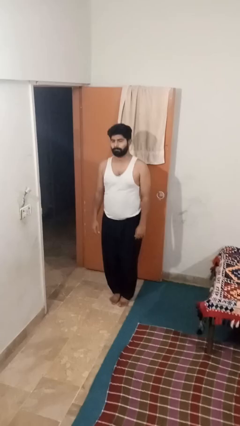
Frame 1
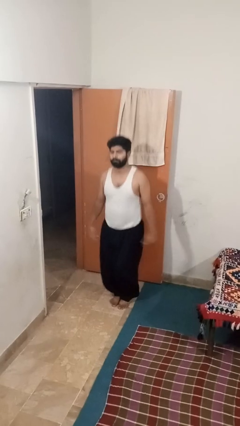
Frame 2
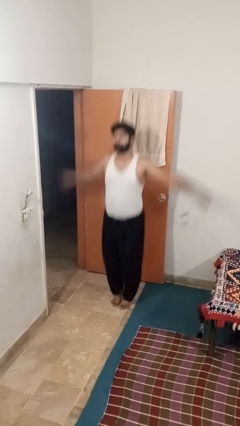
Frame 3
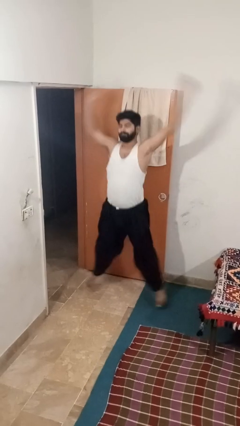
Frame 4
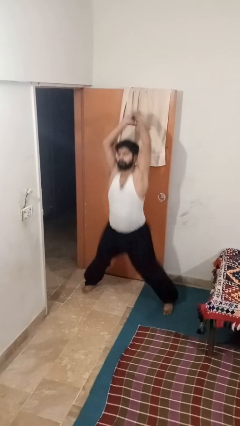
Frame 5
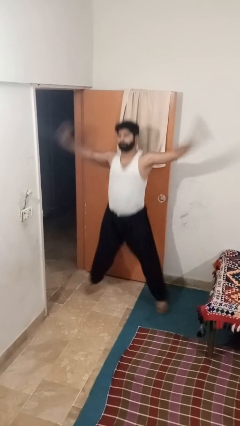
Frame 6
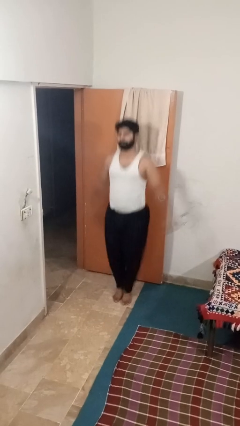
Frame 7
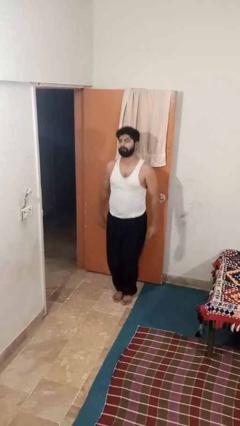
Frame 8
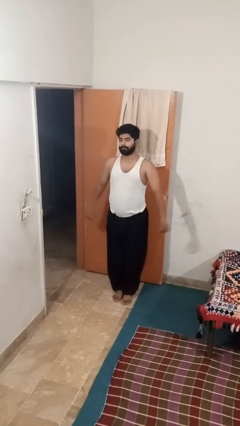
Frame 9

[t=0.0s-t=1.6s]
person exercises with jumping jacks

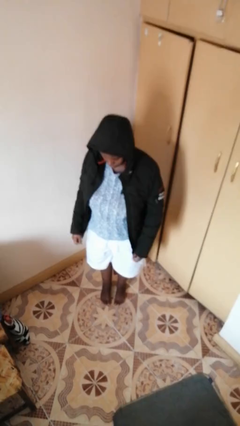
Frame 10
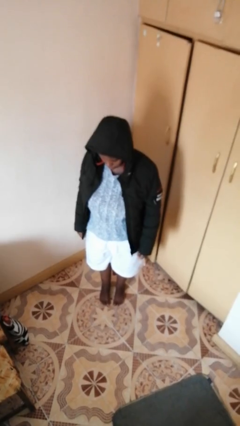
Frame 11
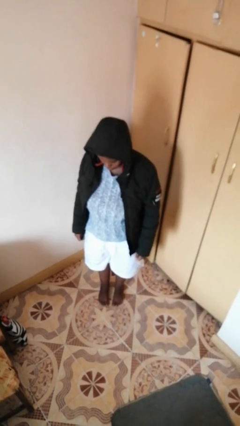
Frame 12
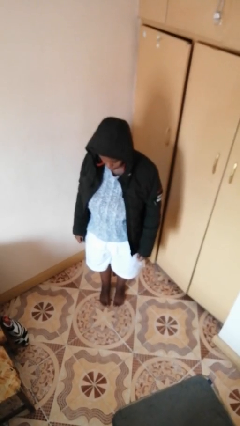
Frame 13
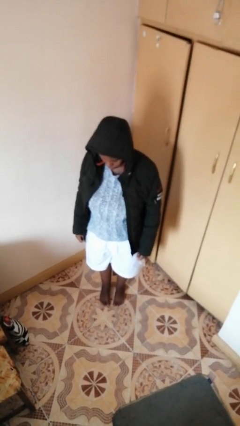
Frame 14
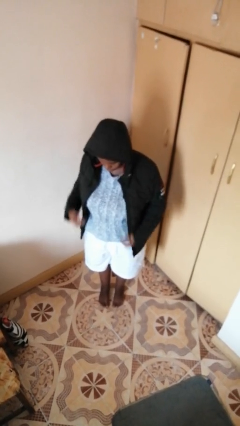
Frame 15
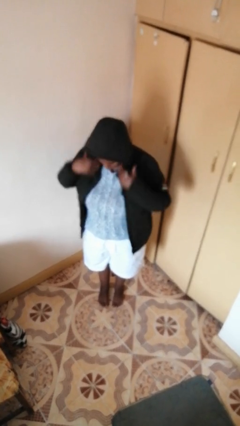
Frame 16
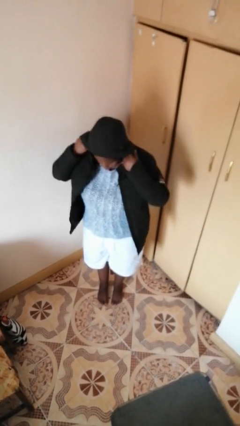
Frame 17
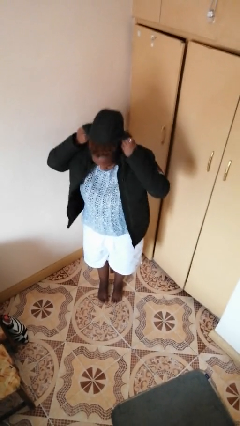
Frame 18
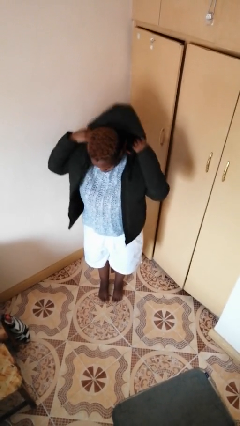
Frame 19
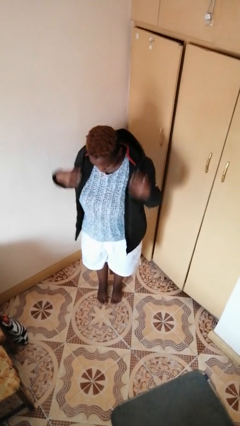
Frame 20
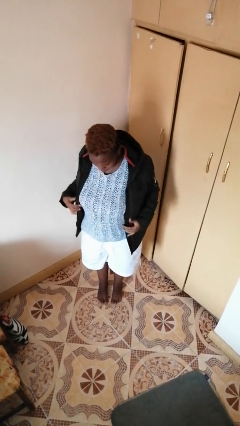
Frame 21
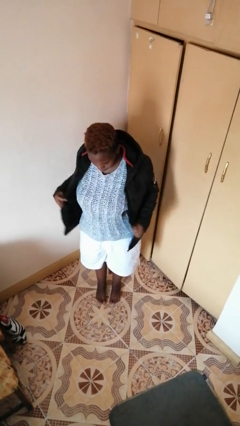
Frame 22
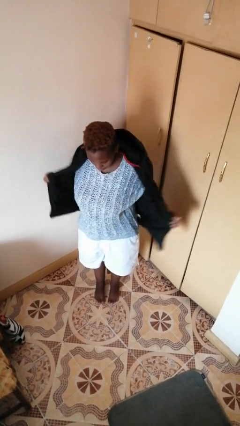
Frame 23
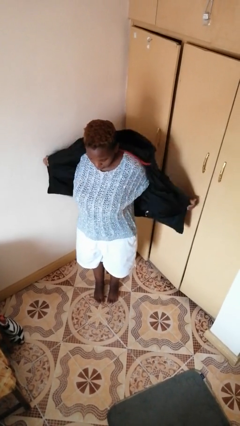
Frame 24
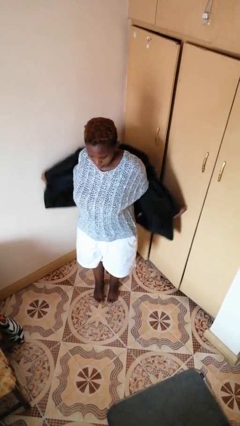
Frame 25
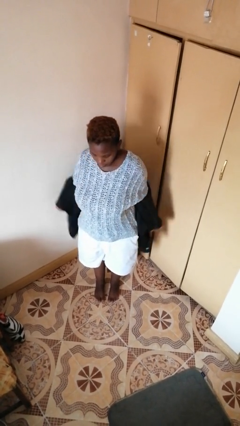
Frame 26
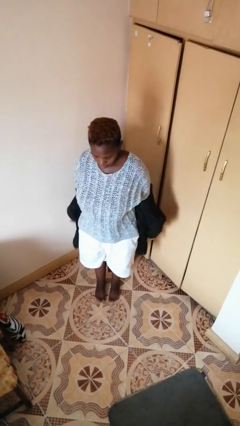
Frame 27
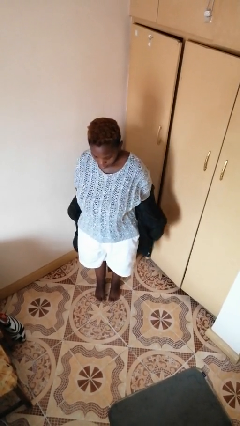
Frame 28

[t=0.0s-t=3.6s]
person takes off hoodie

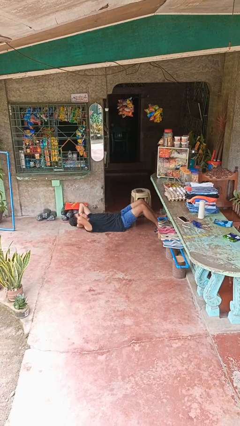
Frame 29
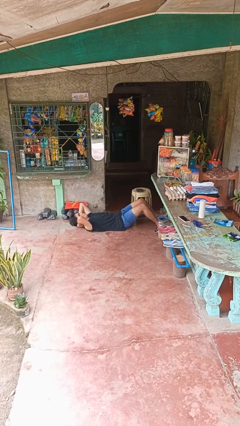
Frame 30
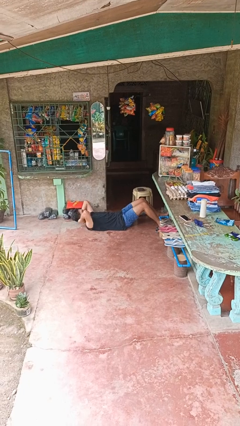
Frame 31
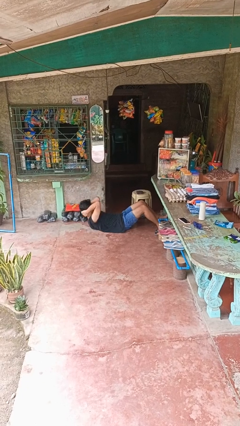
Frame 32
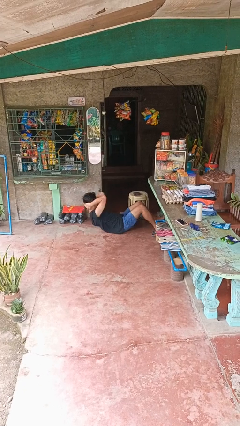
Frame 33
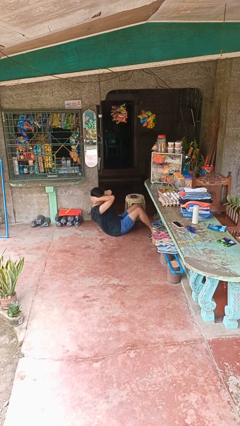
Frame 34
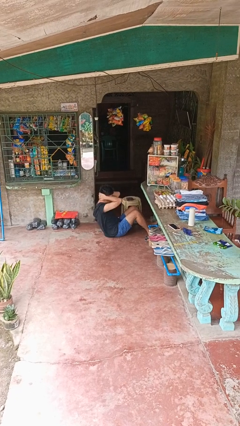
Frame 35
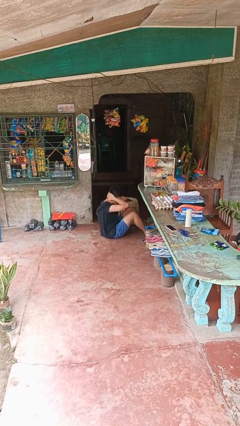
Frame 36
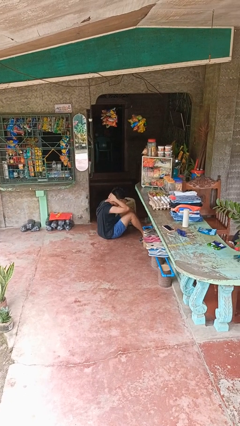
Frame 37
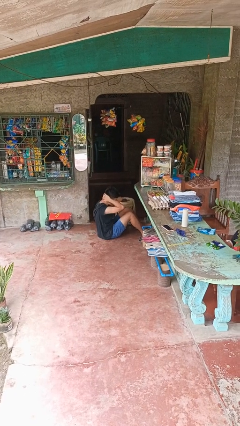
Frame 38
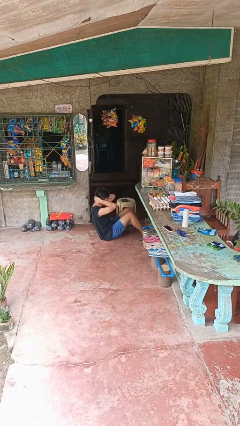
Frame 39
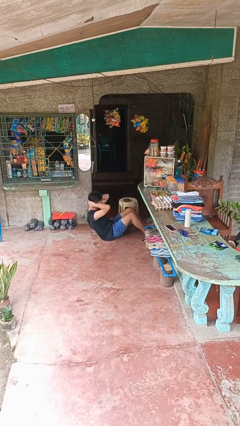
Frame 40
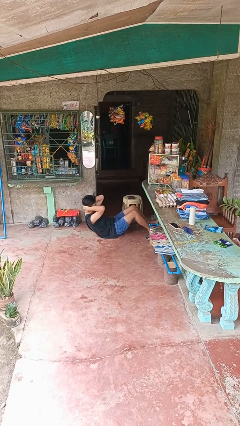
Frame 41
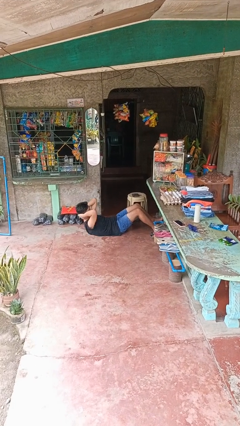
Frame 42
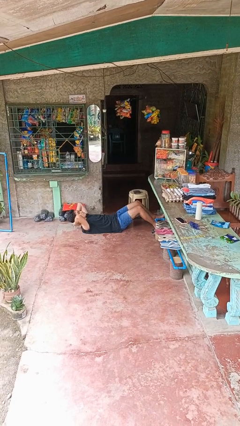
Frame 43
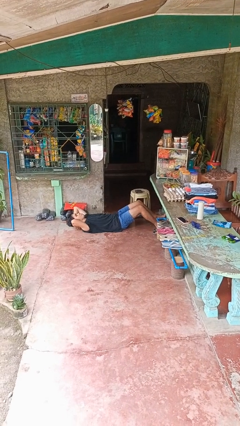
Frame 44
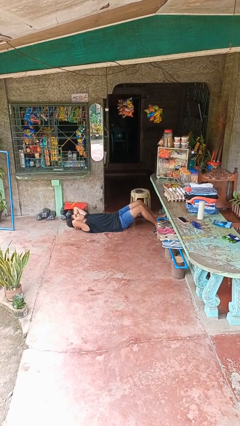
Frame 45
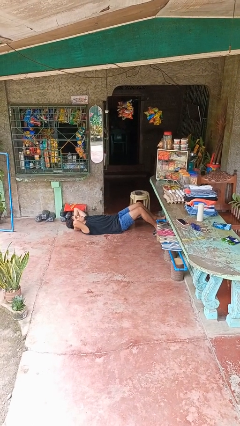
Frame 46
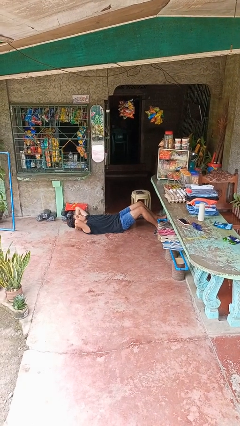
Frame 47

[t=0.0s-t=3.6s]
person exercises with situp

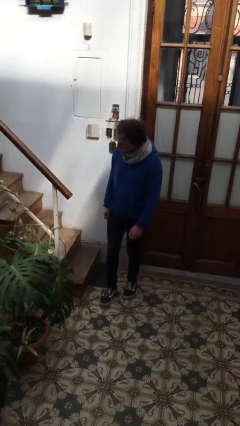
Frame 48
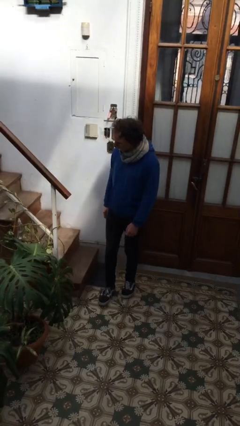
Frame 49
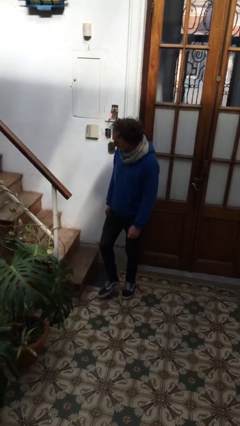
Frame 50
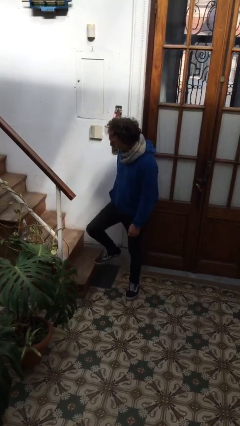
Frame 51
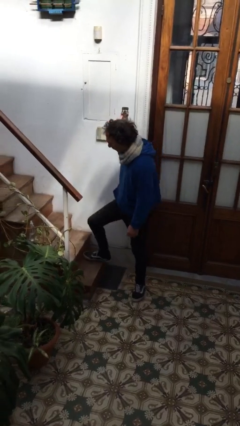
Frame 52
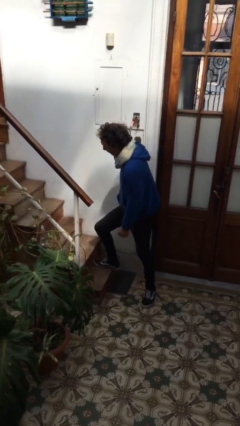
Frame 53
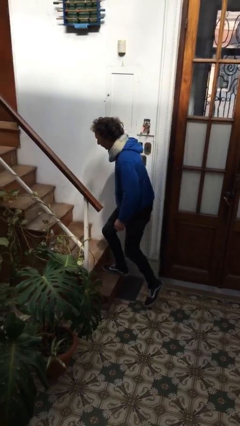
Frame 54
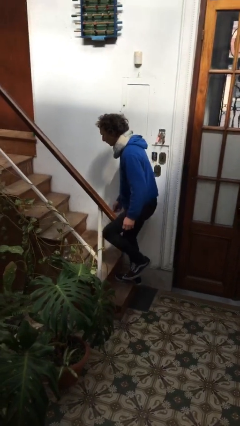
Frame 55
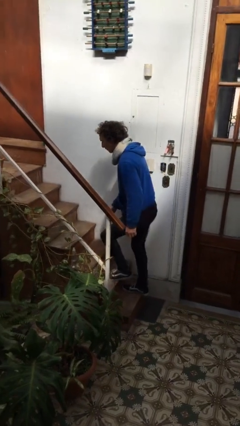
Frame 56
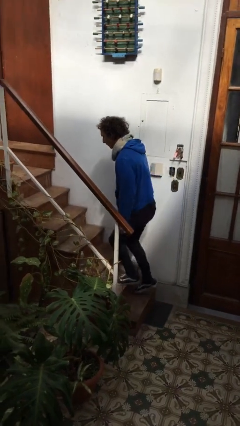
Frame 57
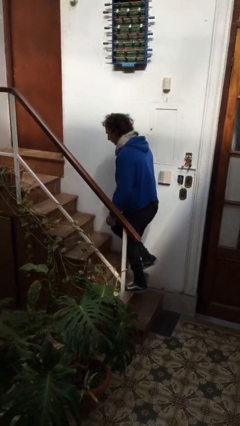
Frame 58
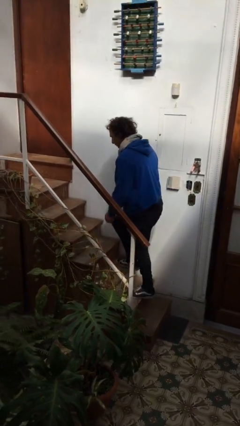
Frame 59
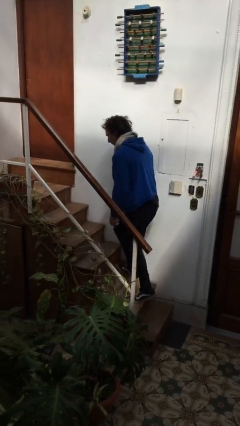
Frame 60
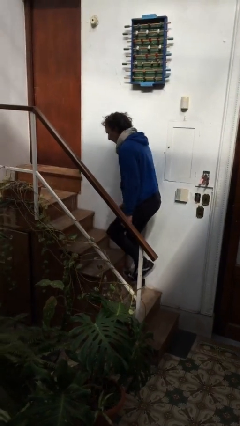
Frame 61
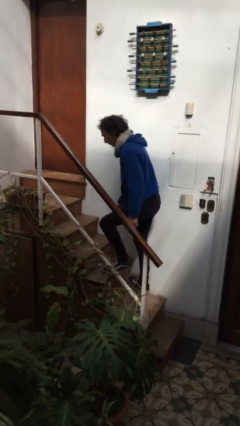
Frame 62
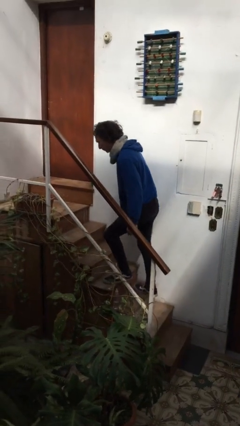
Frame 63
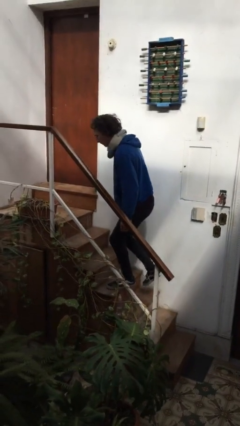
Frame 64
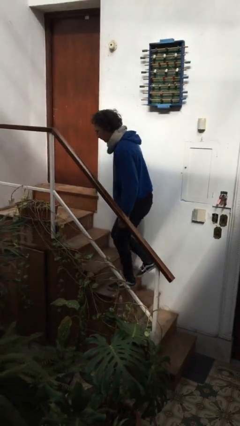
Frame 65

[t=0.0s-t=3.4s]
person climbs up stairs

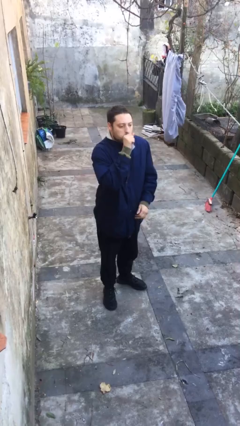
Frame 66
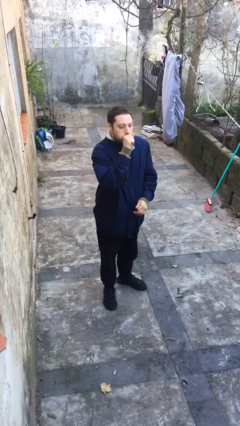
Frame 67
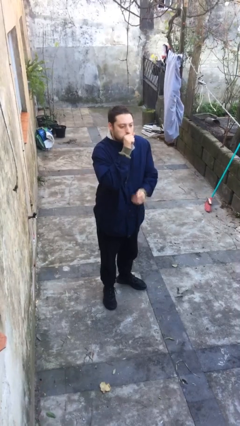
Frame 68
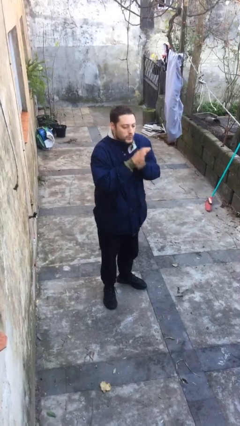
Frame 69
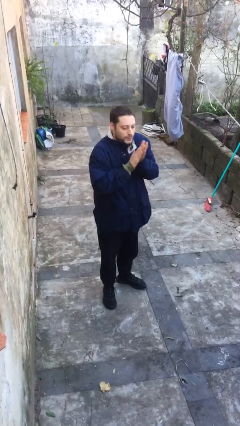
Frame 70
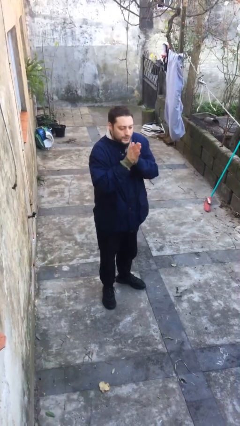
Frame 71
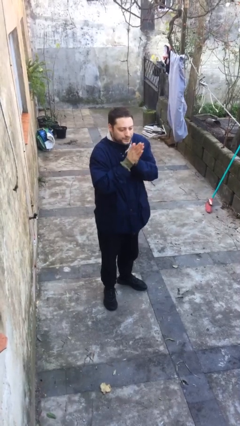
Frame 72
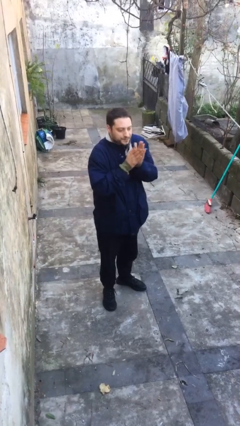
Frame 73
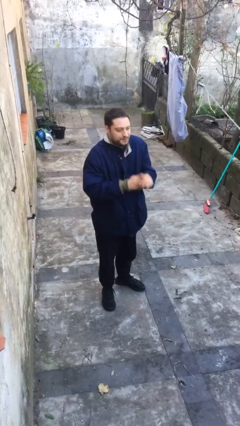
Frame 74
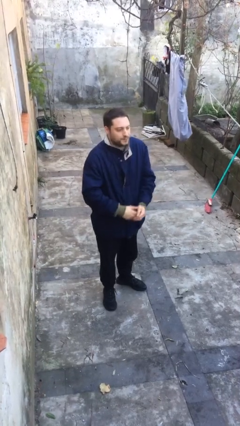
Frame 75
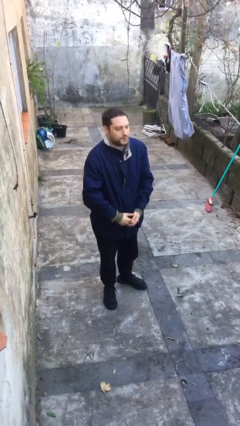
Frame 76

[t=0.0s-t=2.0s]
person blows into hands

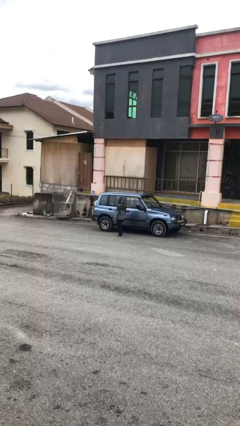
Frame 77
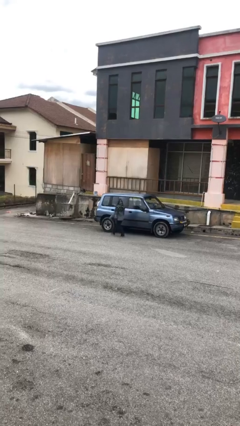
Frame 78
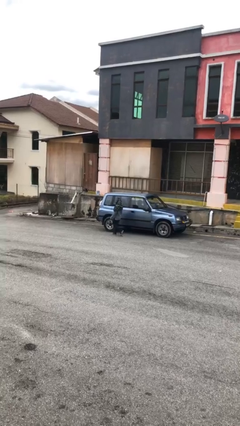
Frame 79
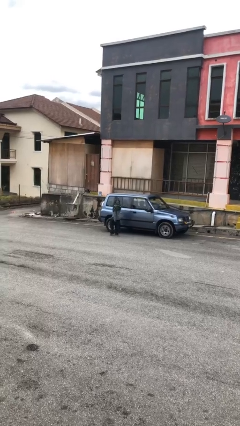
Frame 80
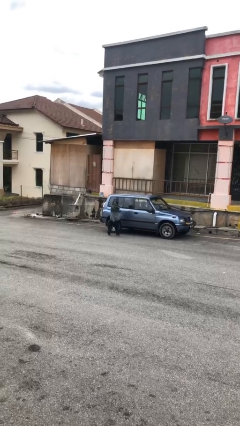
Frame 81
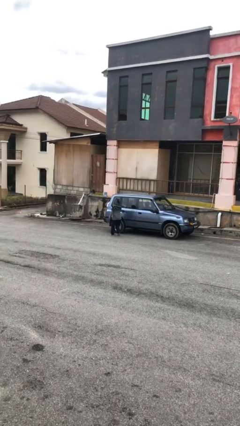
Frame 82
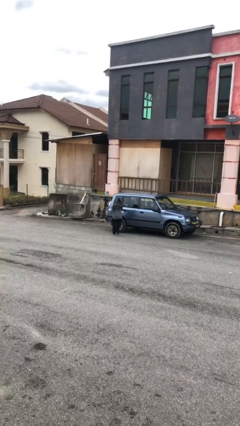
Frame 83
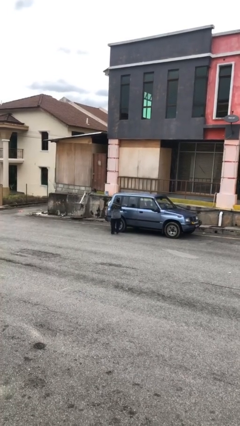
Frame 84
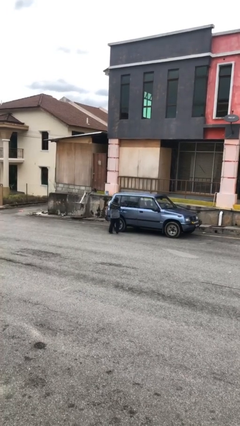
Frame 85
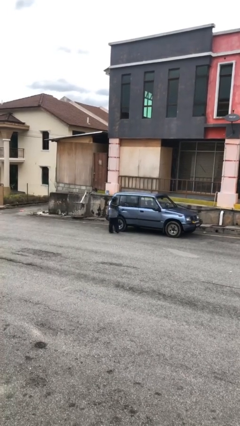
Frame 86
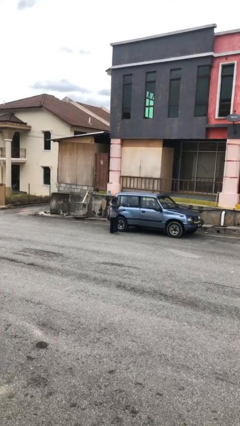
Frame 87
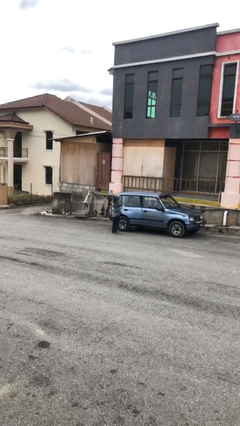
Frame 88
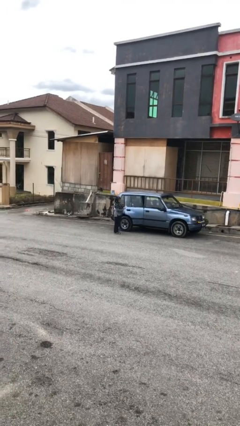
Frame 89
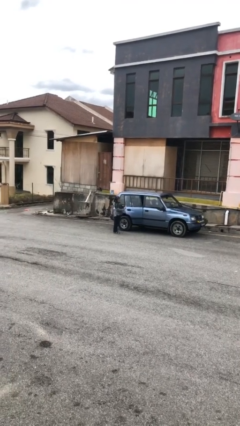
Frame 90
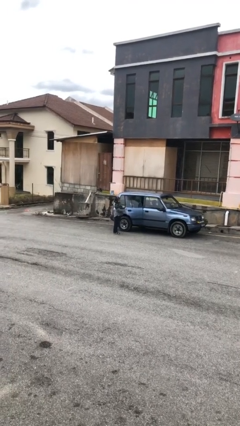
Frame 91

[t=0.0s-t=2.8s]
person opens car door

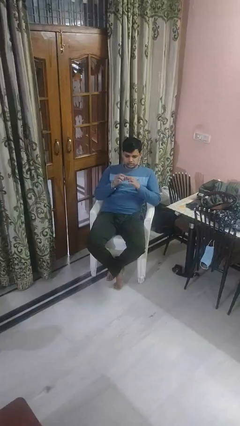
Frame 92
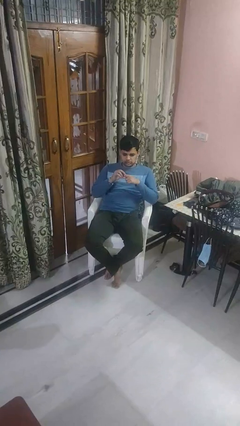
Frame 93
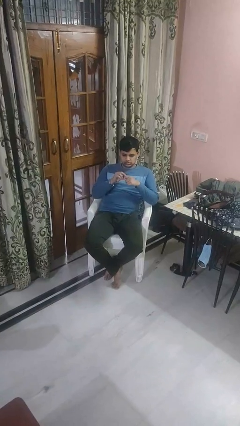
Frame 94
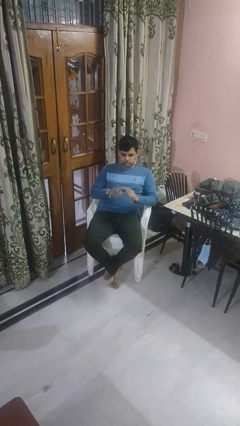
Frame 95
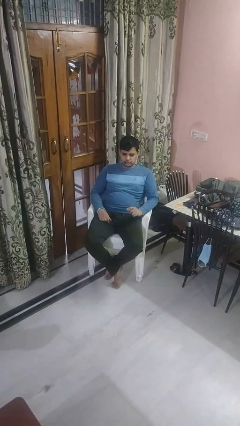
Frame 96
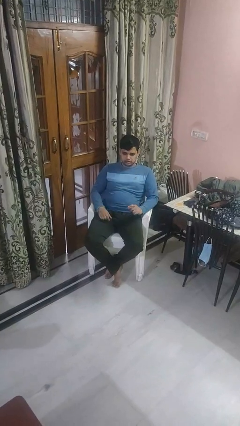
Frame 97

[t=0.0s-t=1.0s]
person puts on ring
